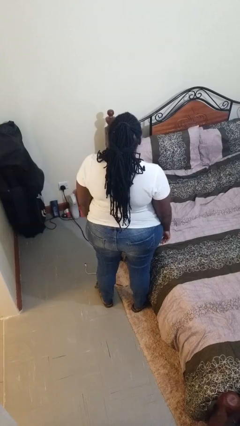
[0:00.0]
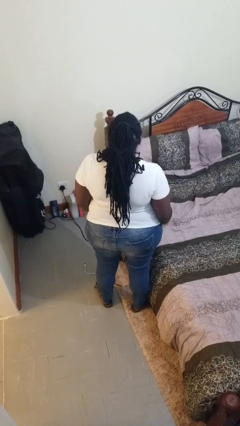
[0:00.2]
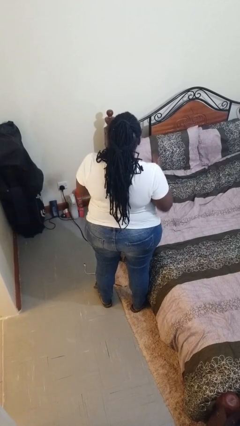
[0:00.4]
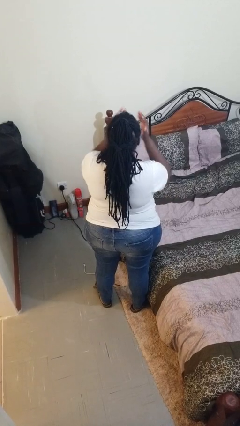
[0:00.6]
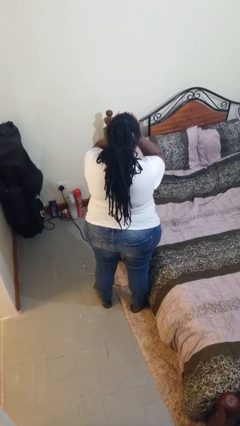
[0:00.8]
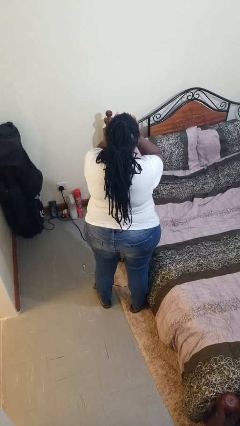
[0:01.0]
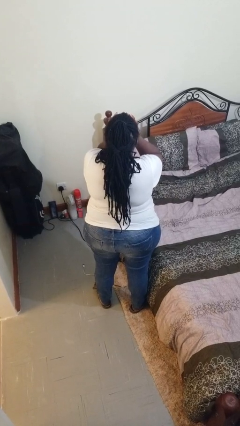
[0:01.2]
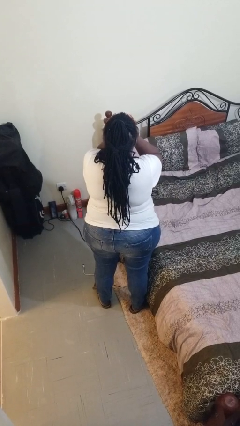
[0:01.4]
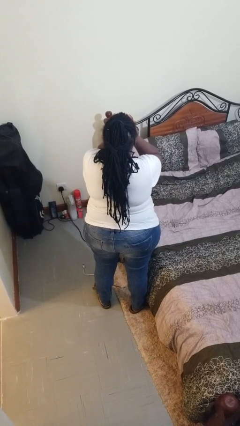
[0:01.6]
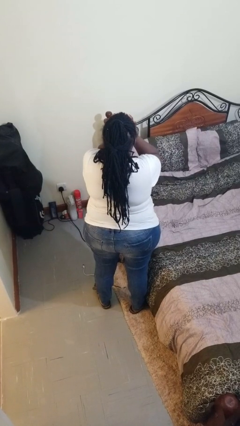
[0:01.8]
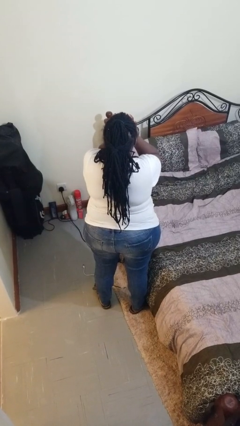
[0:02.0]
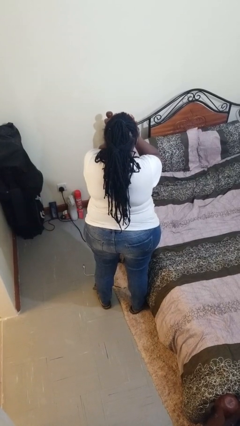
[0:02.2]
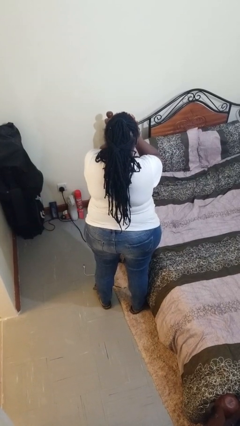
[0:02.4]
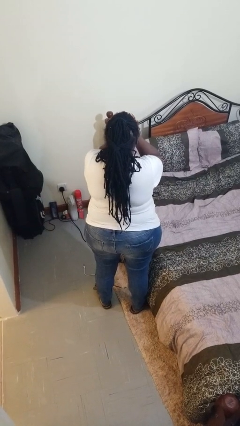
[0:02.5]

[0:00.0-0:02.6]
person covers face with hands

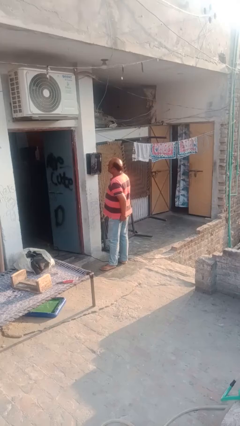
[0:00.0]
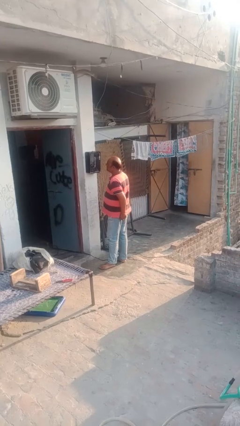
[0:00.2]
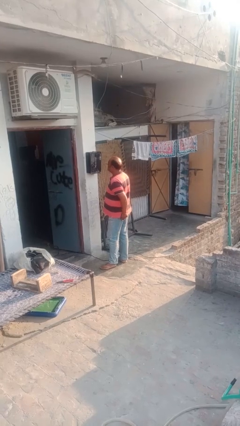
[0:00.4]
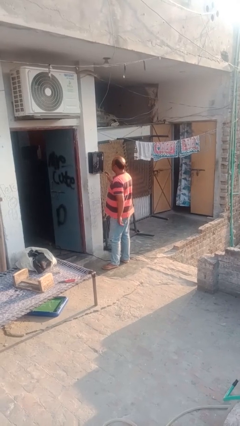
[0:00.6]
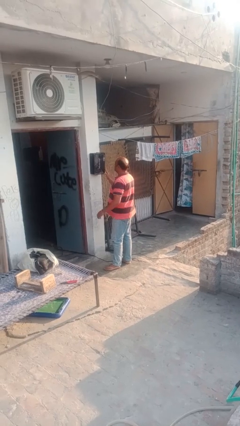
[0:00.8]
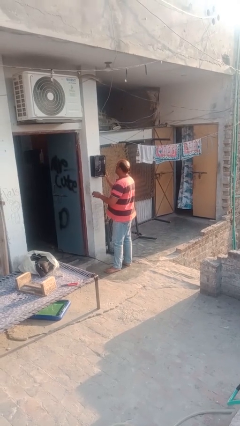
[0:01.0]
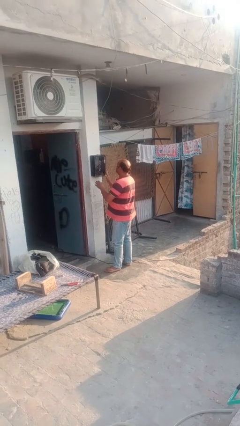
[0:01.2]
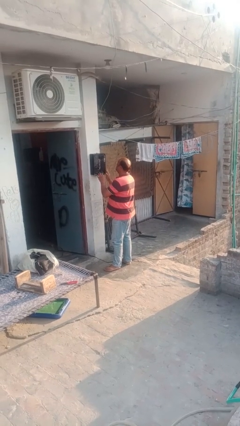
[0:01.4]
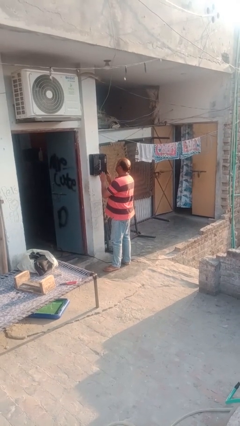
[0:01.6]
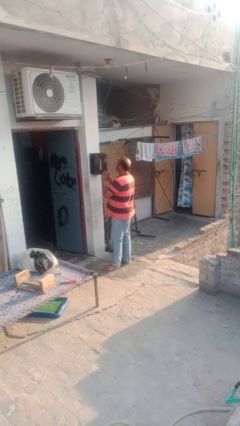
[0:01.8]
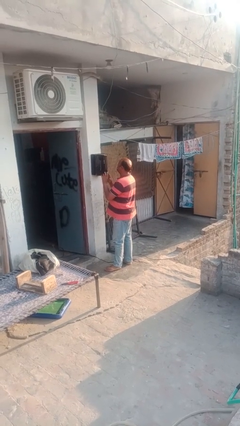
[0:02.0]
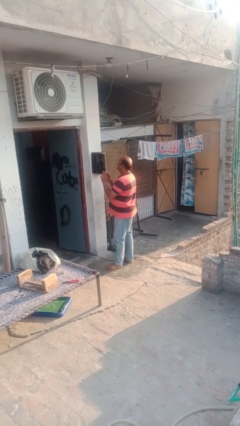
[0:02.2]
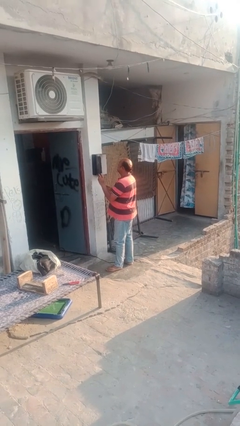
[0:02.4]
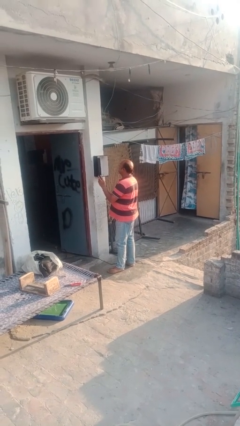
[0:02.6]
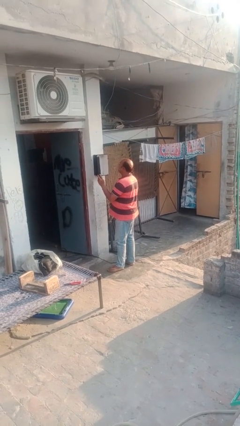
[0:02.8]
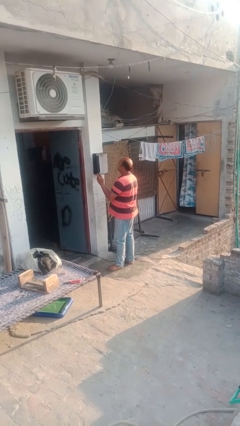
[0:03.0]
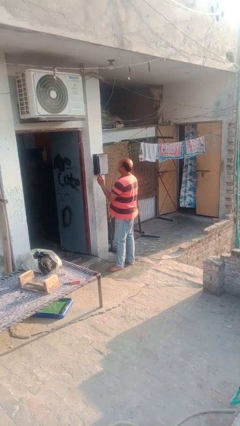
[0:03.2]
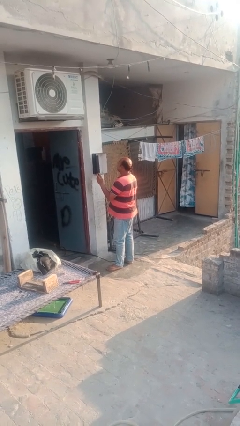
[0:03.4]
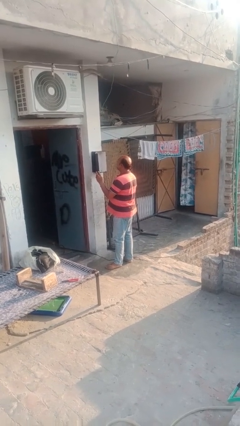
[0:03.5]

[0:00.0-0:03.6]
person opens mailbox

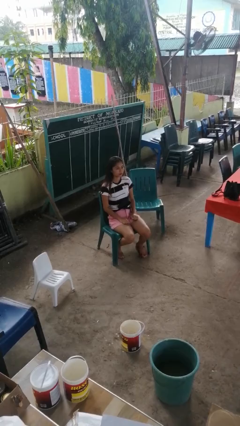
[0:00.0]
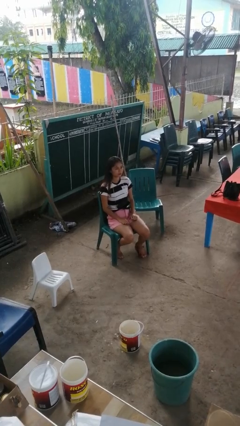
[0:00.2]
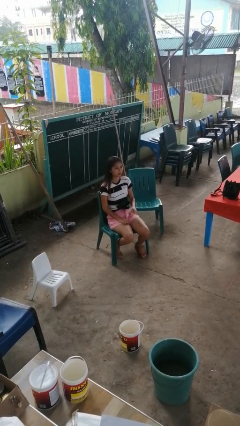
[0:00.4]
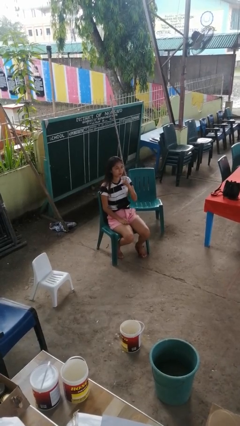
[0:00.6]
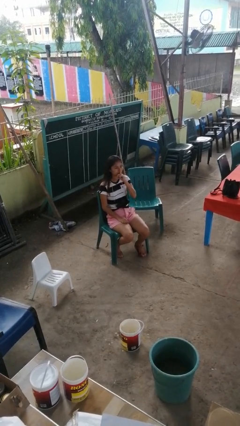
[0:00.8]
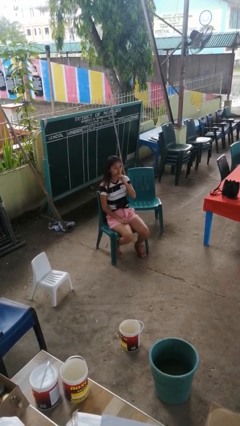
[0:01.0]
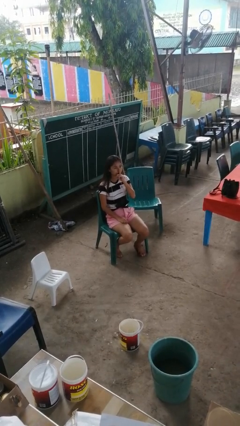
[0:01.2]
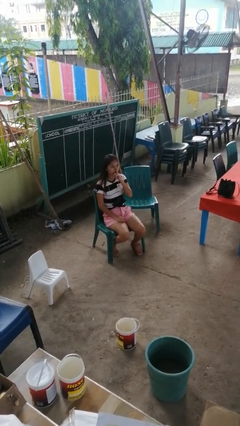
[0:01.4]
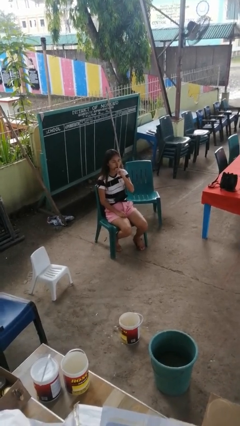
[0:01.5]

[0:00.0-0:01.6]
person gestures be quiet

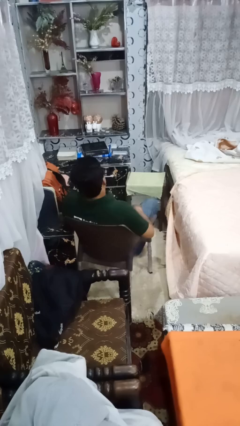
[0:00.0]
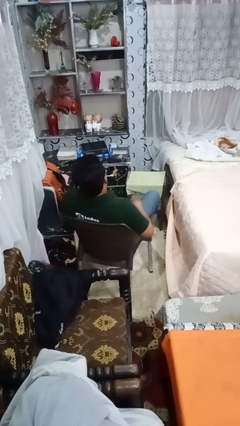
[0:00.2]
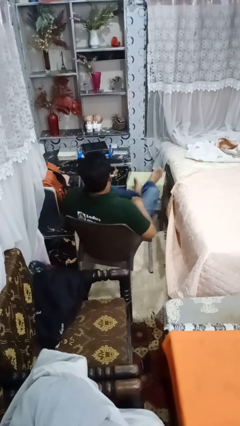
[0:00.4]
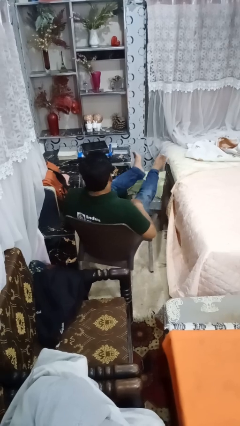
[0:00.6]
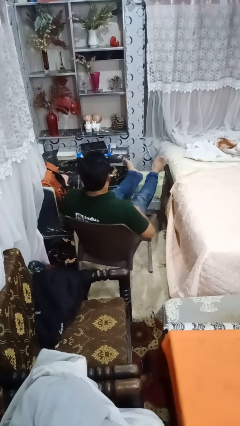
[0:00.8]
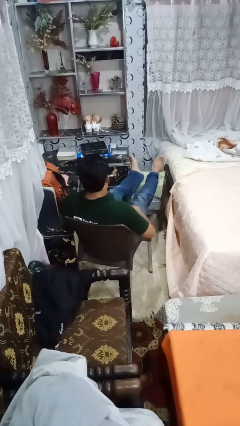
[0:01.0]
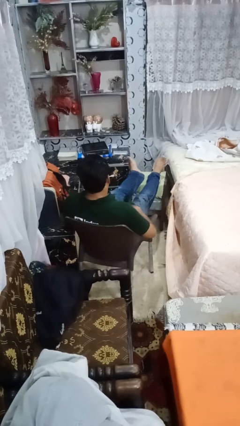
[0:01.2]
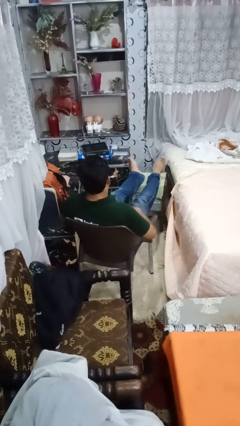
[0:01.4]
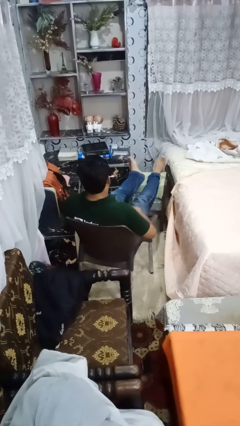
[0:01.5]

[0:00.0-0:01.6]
person puts feet up

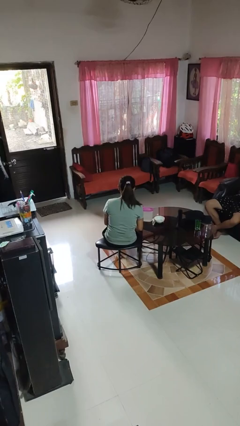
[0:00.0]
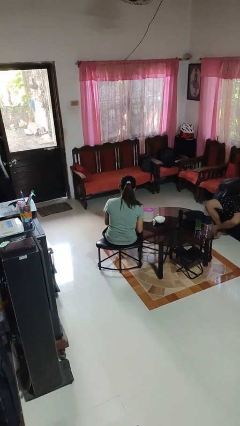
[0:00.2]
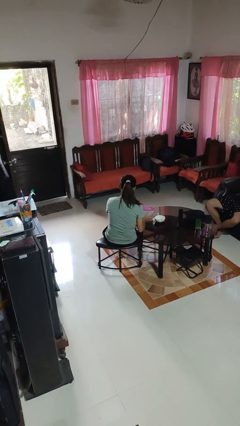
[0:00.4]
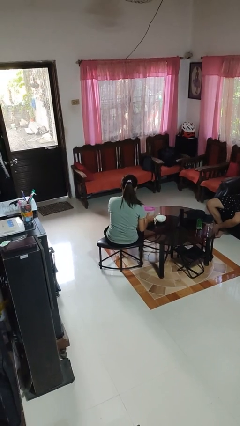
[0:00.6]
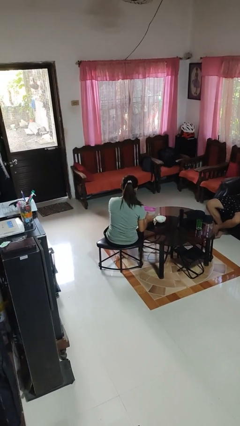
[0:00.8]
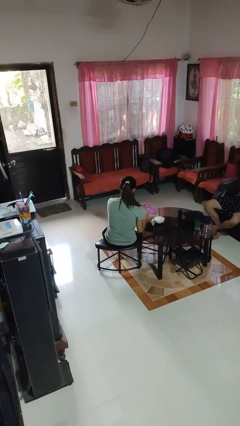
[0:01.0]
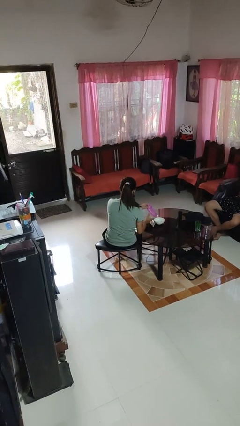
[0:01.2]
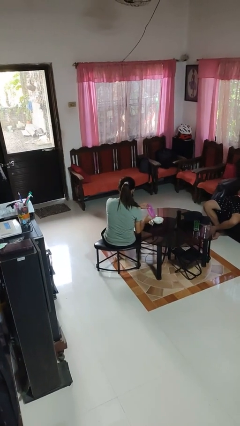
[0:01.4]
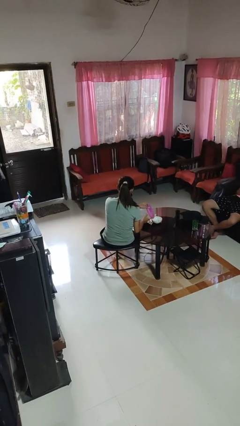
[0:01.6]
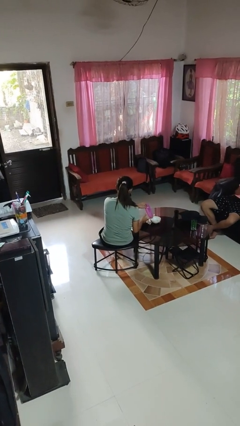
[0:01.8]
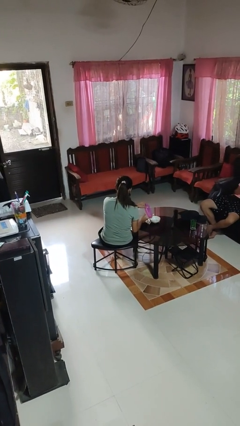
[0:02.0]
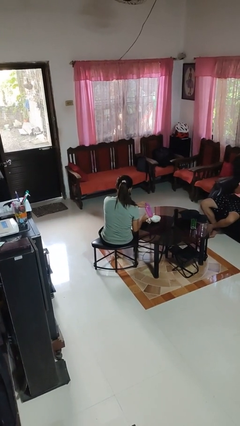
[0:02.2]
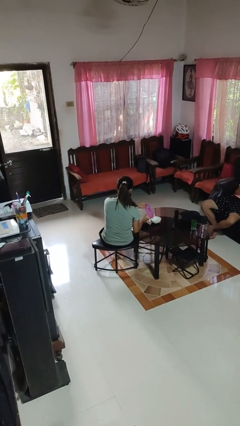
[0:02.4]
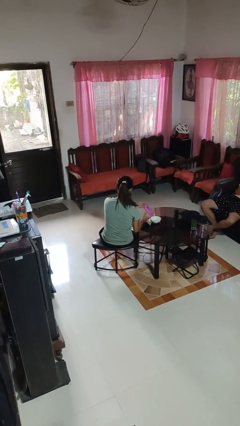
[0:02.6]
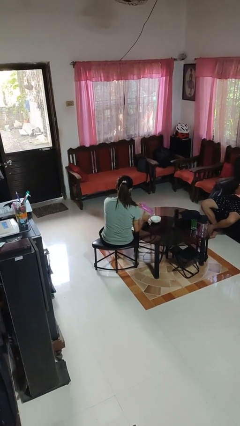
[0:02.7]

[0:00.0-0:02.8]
person pours into bowl

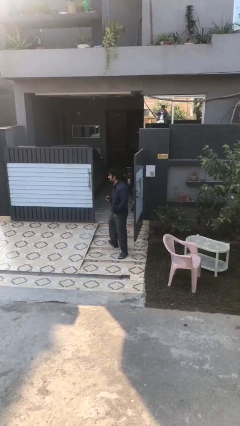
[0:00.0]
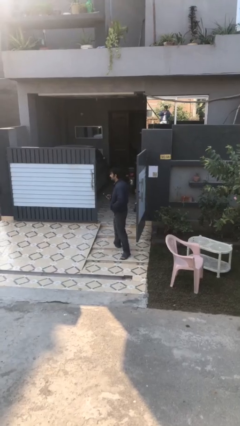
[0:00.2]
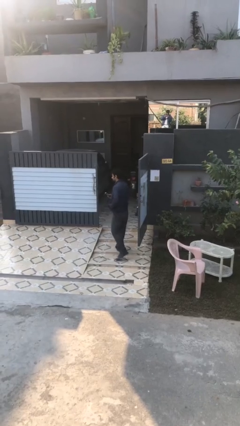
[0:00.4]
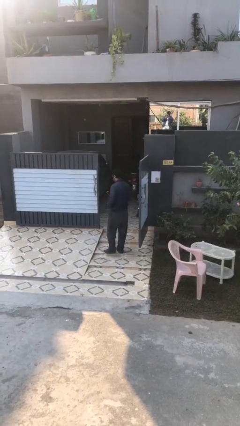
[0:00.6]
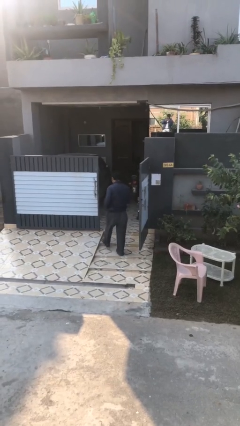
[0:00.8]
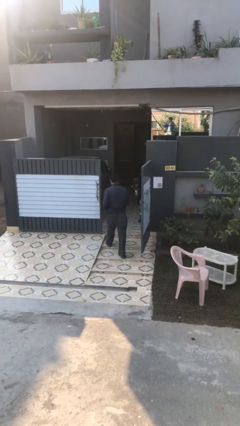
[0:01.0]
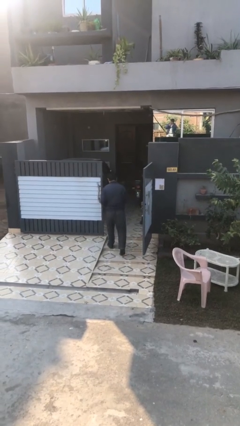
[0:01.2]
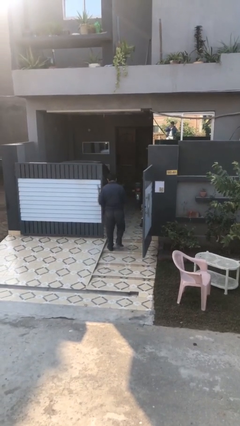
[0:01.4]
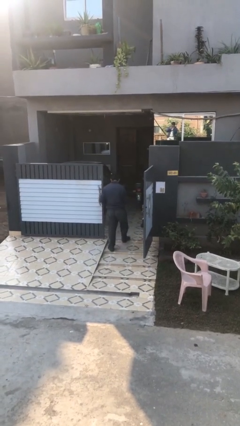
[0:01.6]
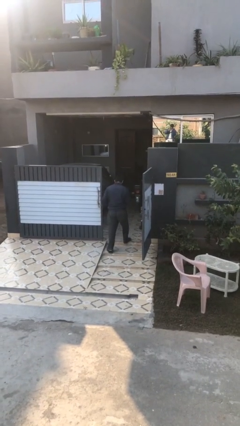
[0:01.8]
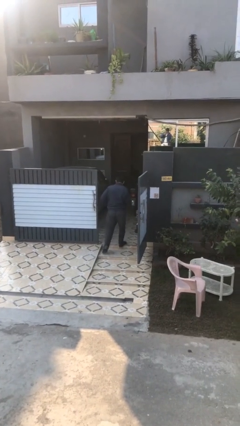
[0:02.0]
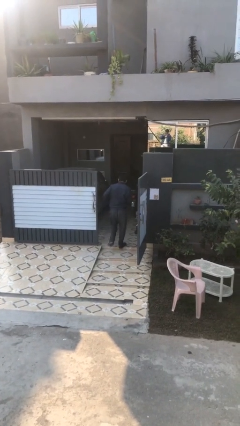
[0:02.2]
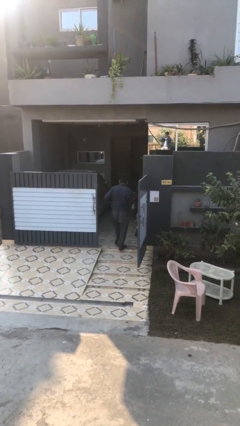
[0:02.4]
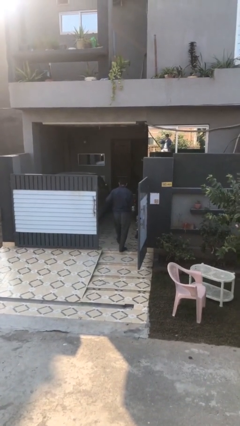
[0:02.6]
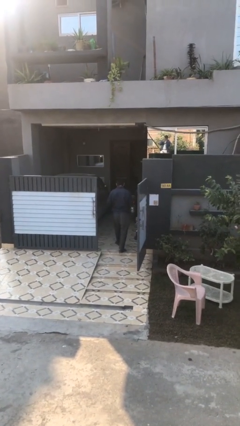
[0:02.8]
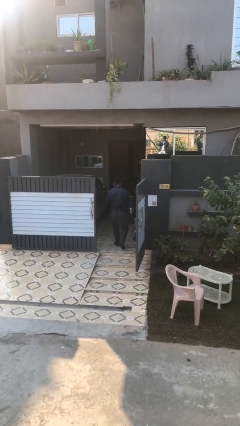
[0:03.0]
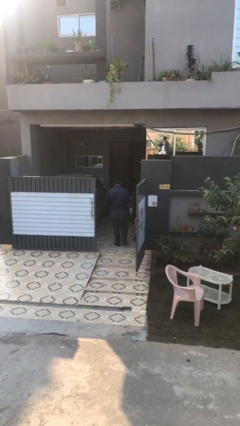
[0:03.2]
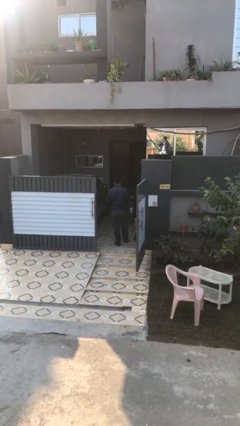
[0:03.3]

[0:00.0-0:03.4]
person exits scene through structure

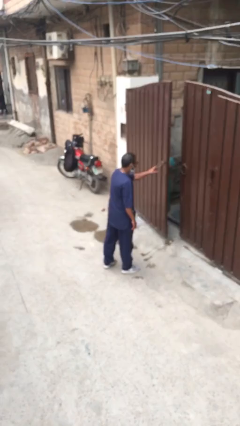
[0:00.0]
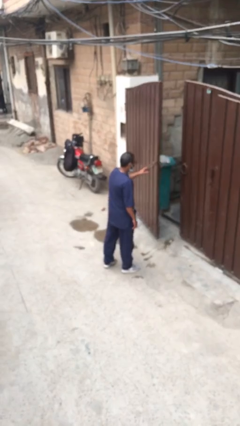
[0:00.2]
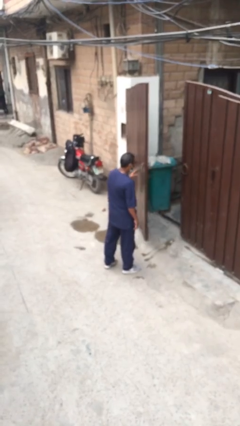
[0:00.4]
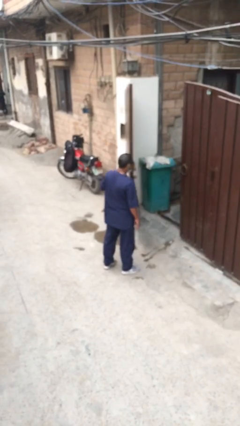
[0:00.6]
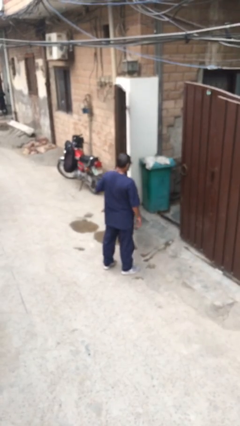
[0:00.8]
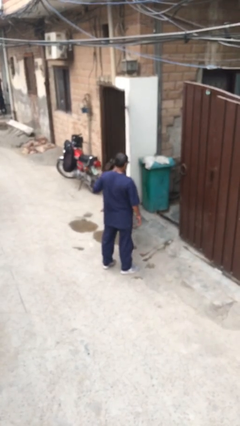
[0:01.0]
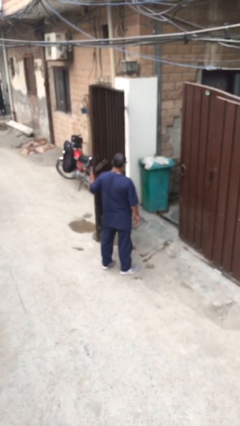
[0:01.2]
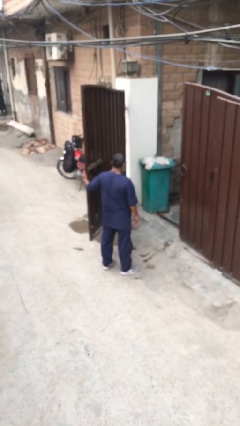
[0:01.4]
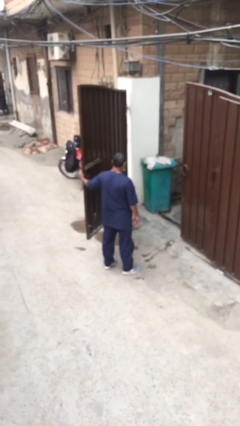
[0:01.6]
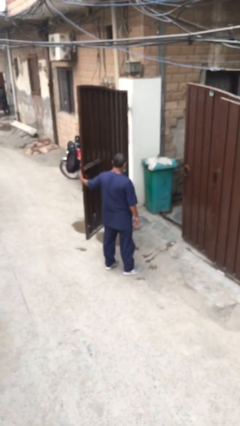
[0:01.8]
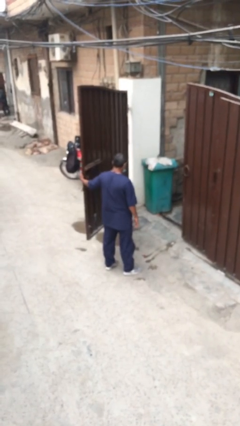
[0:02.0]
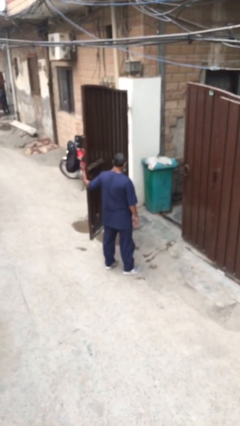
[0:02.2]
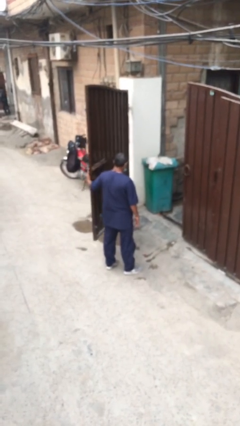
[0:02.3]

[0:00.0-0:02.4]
person opens facility door
